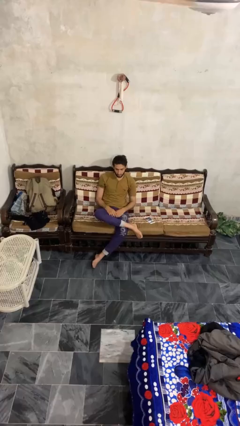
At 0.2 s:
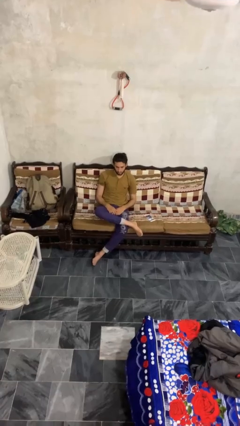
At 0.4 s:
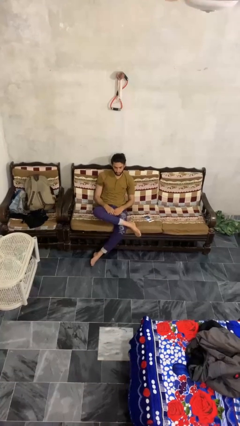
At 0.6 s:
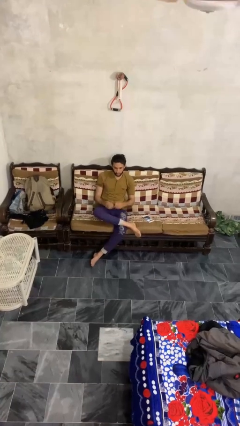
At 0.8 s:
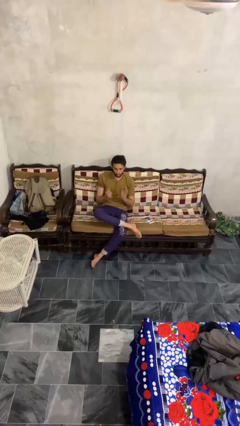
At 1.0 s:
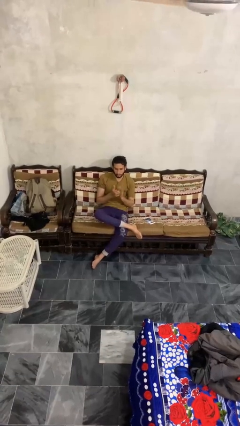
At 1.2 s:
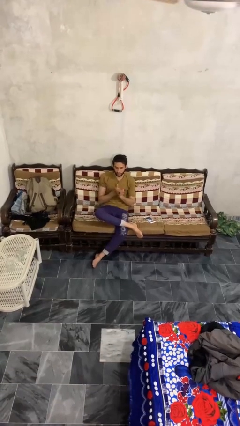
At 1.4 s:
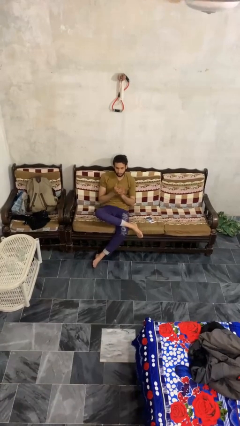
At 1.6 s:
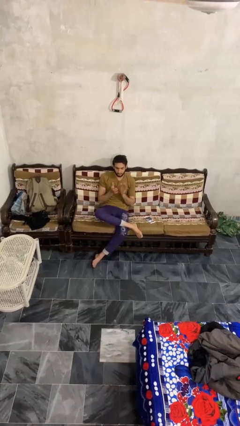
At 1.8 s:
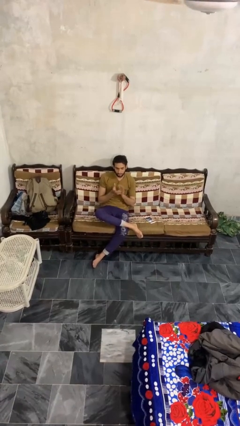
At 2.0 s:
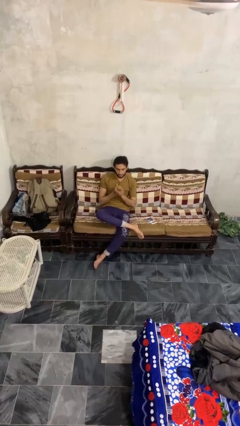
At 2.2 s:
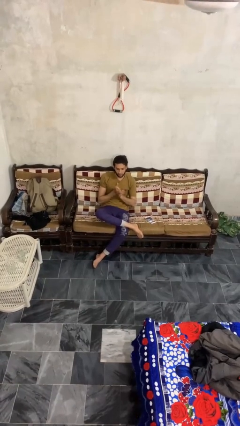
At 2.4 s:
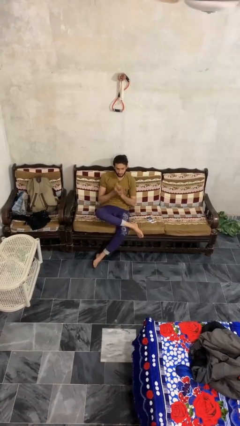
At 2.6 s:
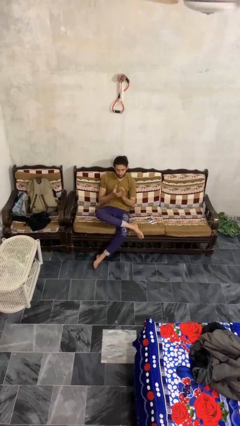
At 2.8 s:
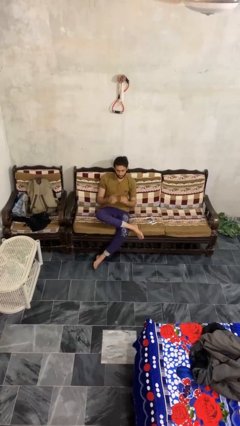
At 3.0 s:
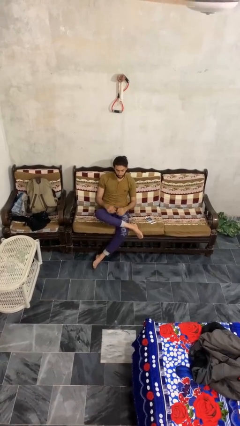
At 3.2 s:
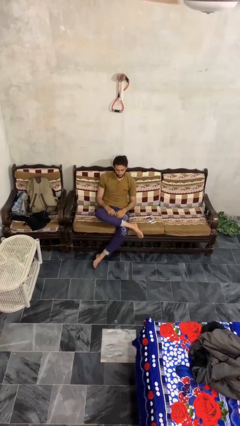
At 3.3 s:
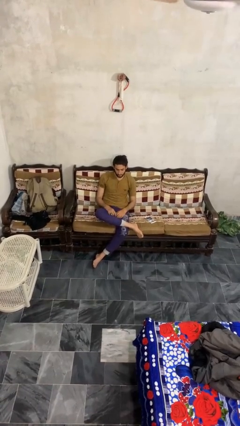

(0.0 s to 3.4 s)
person claps hands

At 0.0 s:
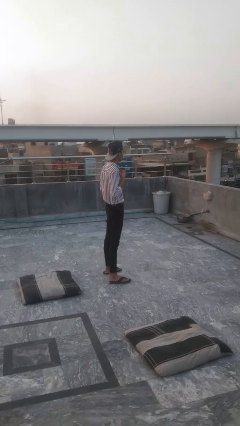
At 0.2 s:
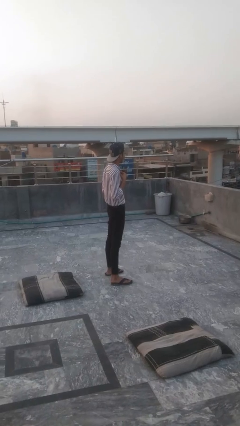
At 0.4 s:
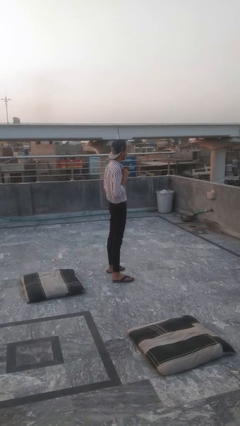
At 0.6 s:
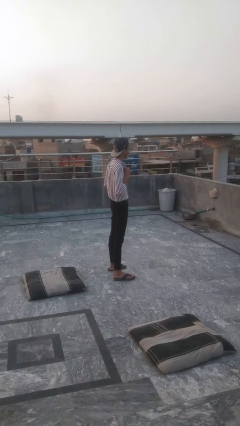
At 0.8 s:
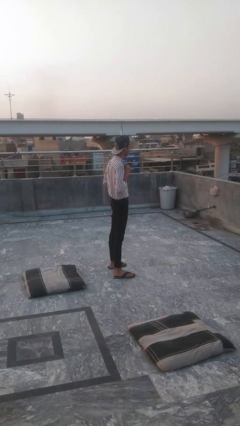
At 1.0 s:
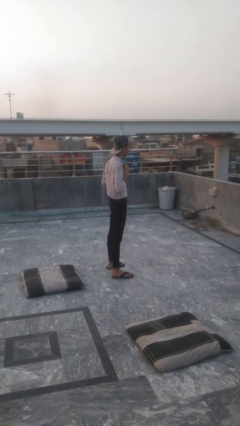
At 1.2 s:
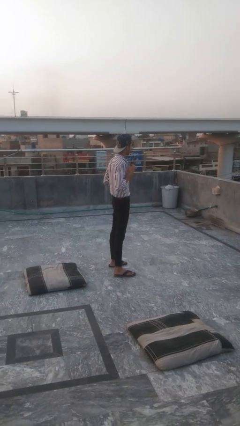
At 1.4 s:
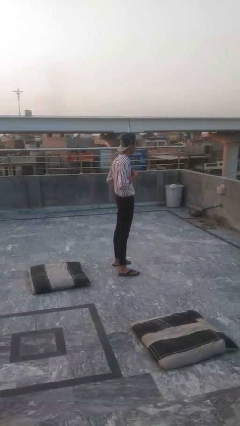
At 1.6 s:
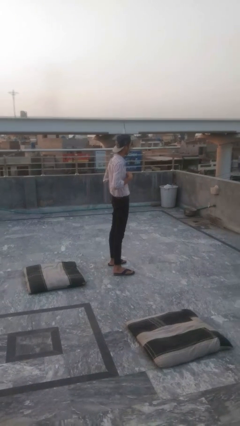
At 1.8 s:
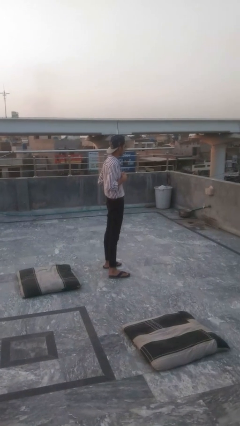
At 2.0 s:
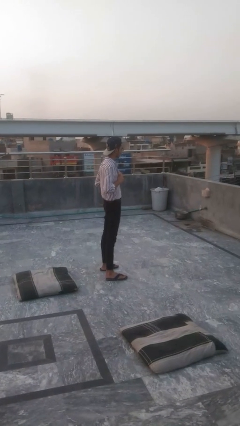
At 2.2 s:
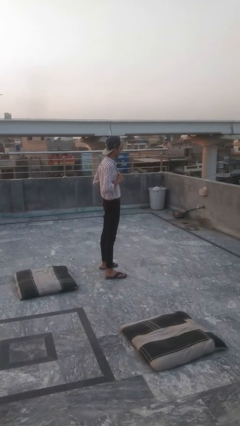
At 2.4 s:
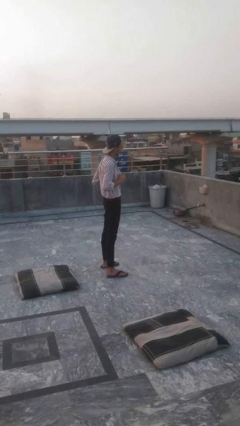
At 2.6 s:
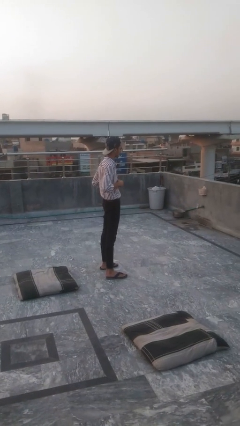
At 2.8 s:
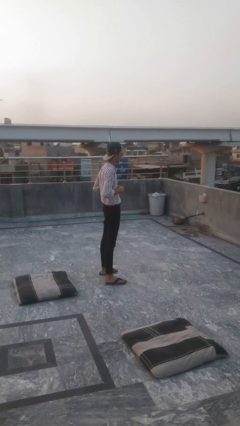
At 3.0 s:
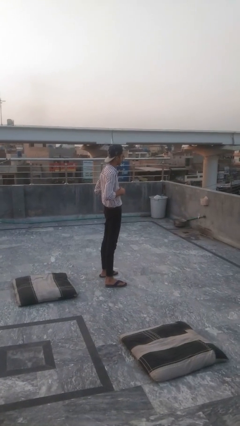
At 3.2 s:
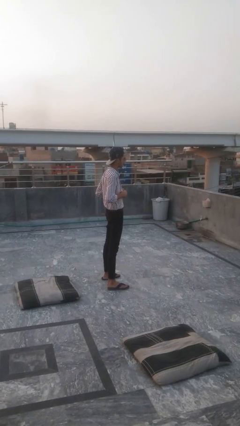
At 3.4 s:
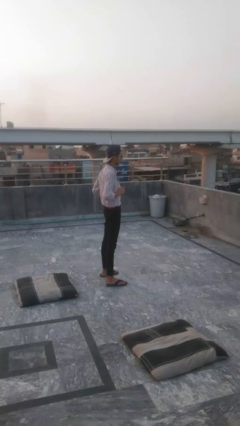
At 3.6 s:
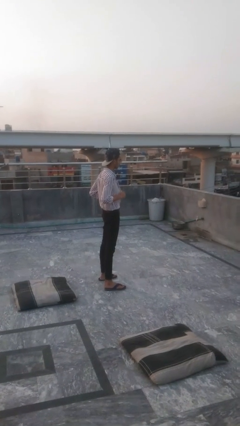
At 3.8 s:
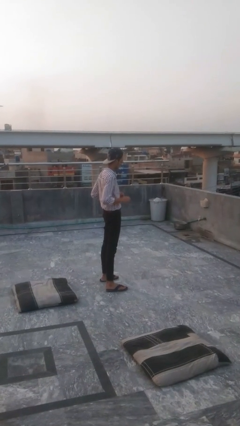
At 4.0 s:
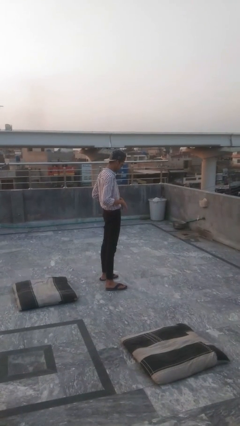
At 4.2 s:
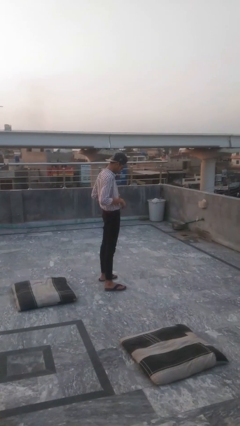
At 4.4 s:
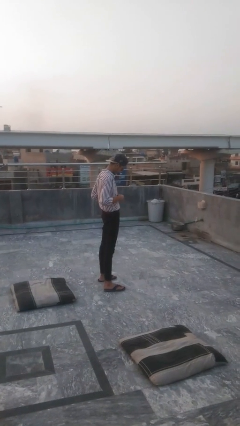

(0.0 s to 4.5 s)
person unbuttons shirt

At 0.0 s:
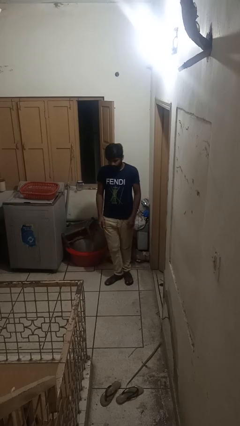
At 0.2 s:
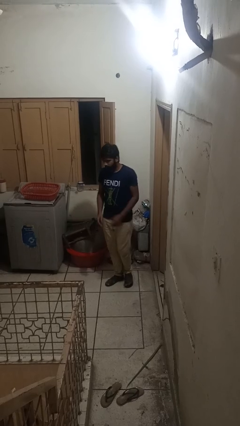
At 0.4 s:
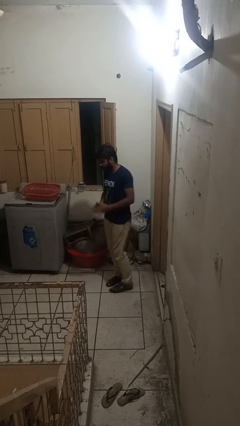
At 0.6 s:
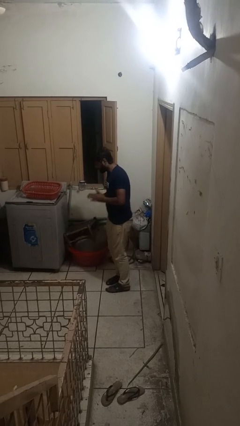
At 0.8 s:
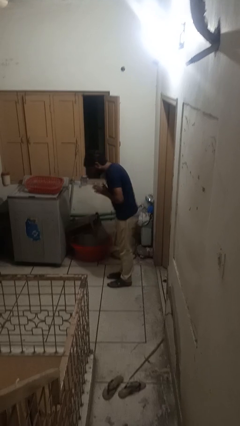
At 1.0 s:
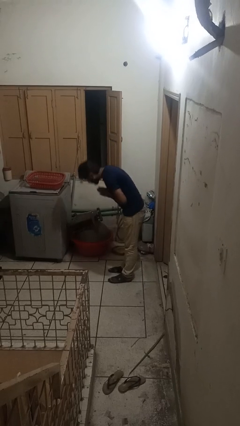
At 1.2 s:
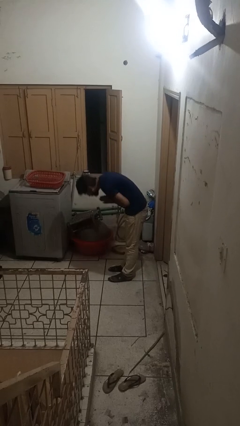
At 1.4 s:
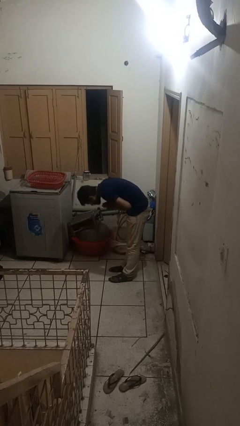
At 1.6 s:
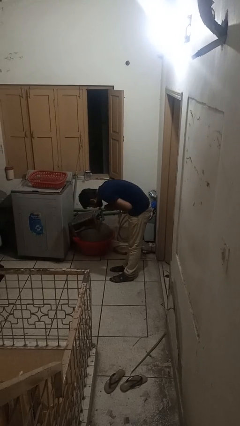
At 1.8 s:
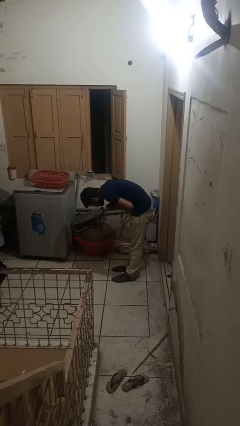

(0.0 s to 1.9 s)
person bows

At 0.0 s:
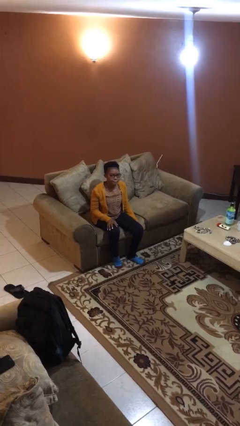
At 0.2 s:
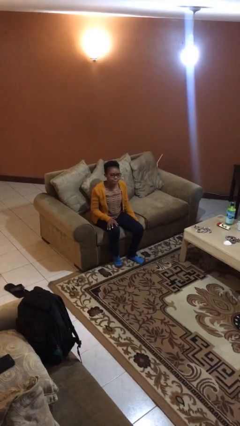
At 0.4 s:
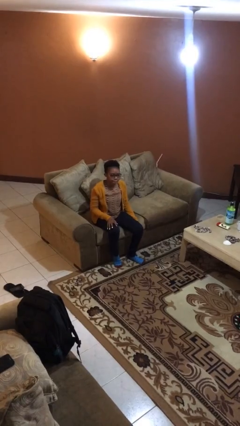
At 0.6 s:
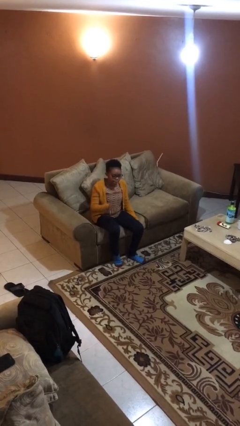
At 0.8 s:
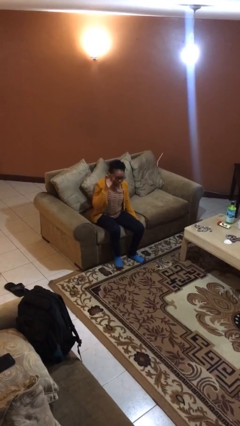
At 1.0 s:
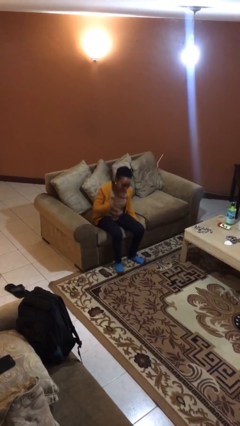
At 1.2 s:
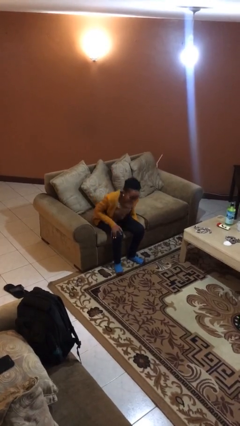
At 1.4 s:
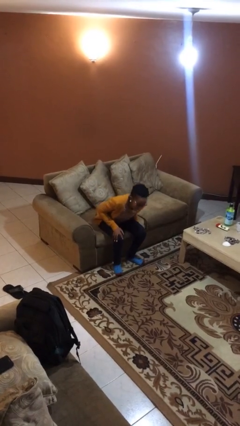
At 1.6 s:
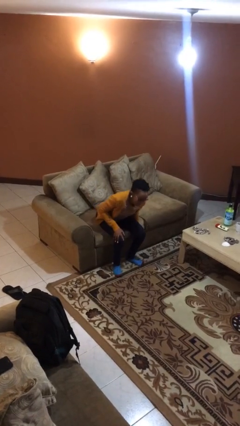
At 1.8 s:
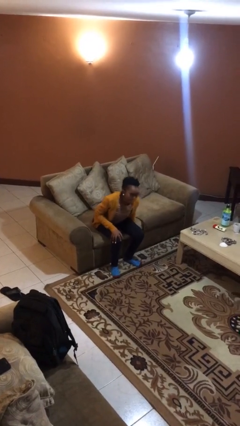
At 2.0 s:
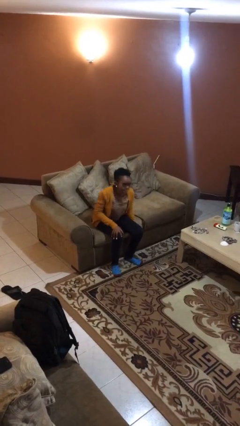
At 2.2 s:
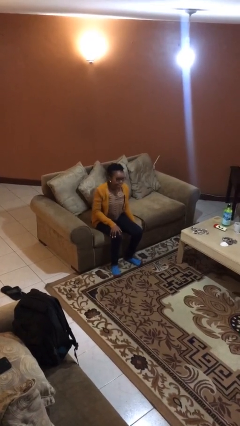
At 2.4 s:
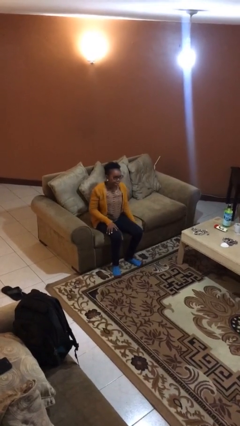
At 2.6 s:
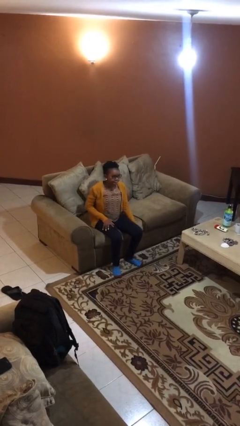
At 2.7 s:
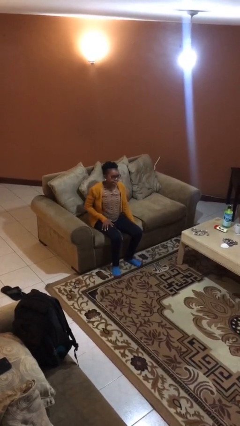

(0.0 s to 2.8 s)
person slaps hands on thighs

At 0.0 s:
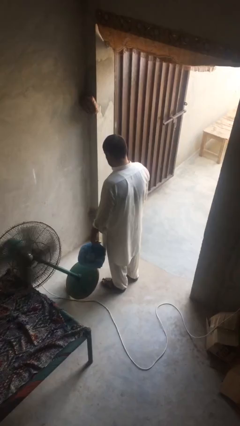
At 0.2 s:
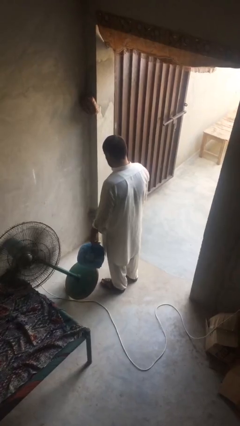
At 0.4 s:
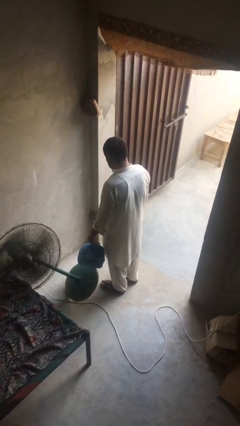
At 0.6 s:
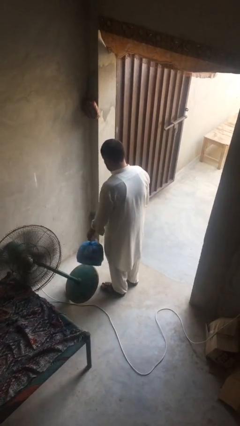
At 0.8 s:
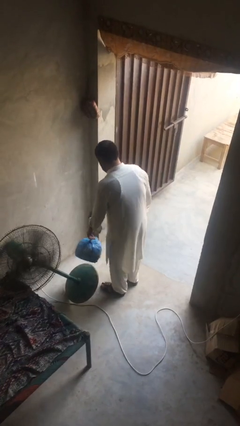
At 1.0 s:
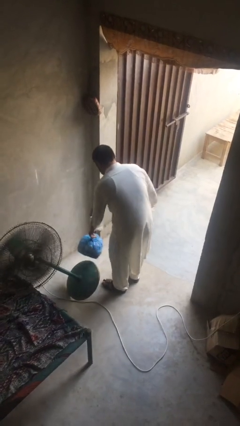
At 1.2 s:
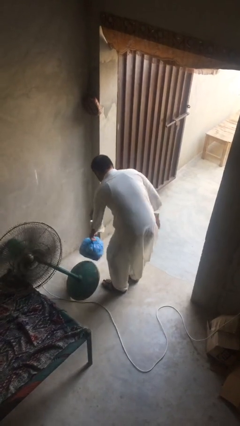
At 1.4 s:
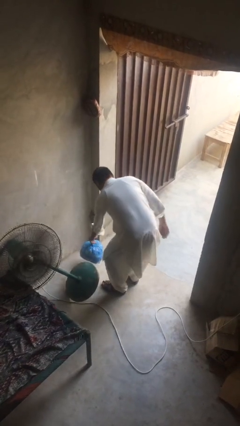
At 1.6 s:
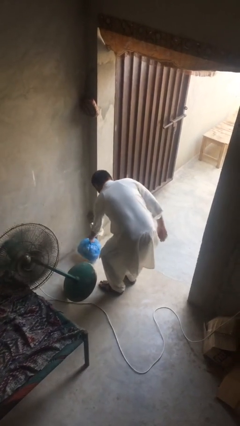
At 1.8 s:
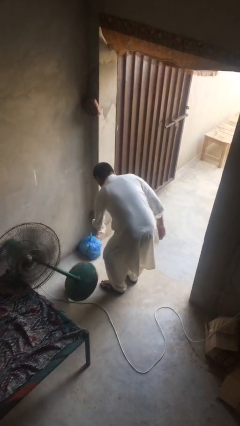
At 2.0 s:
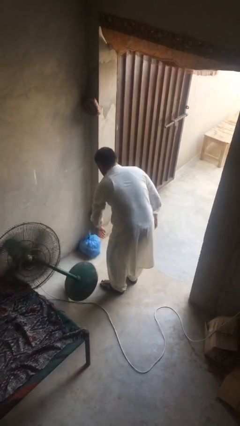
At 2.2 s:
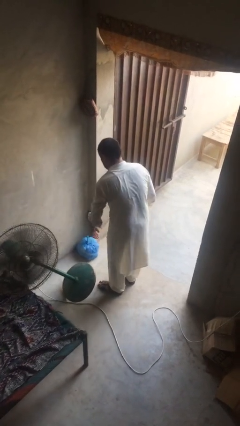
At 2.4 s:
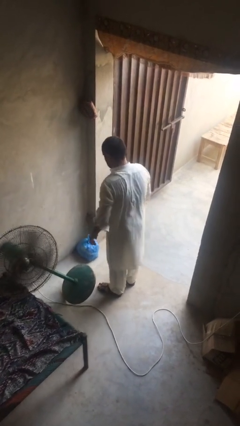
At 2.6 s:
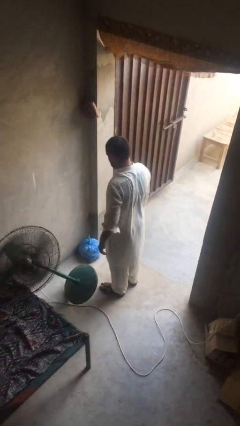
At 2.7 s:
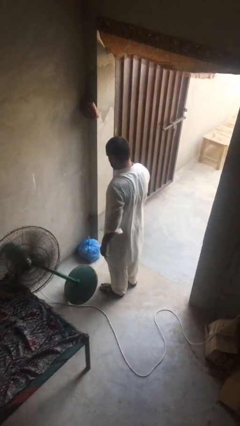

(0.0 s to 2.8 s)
person puts down object on floor

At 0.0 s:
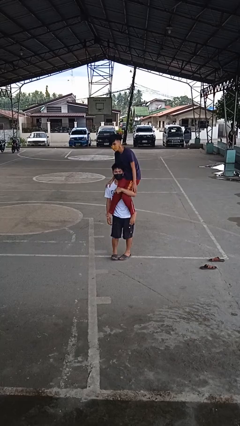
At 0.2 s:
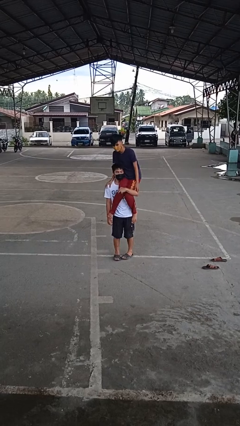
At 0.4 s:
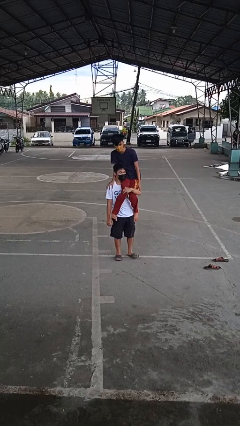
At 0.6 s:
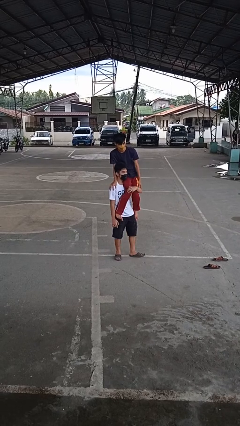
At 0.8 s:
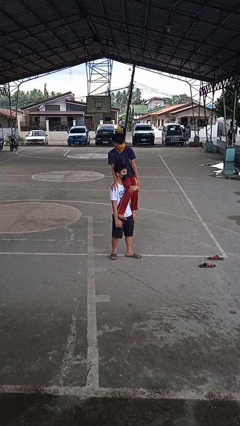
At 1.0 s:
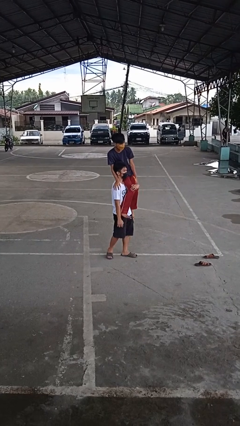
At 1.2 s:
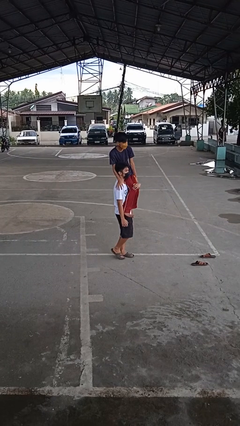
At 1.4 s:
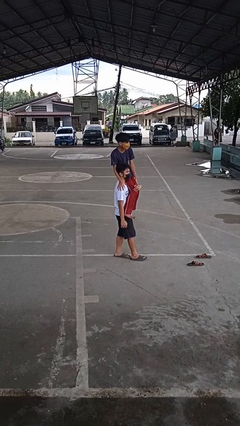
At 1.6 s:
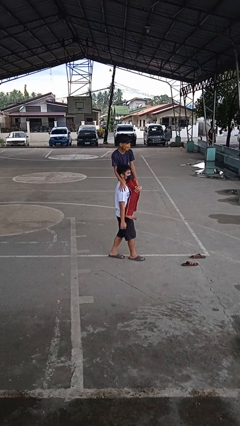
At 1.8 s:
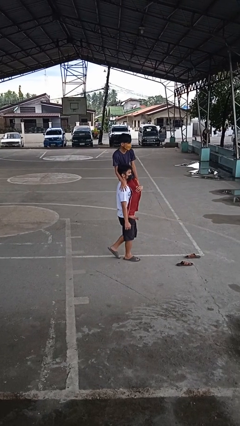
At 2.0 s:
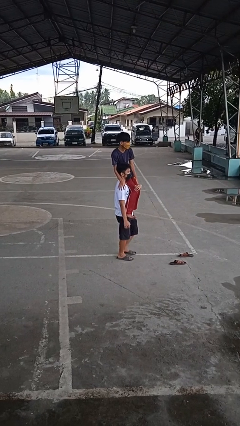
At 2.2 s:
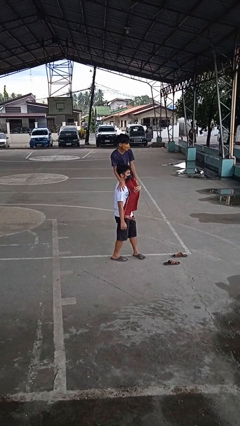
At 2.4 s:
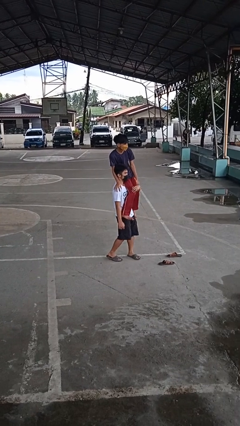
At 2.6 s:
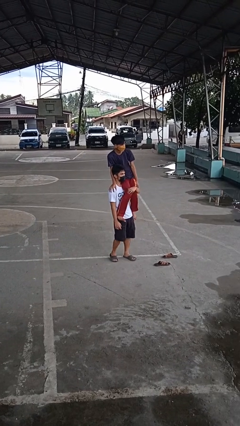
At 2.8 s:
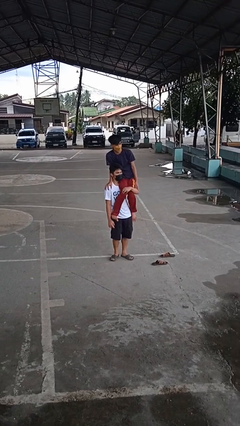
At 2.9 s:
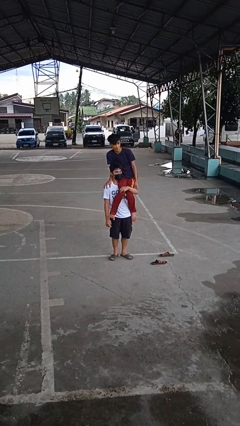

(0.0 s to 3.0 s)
person carries person on shoulders
